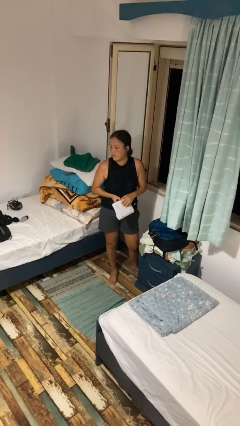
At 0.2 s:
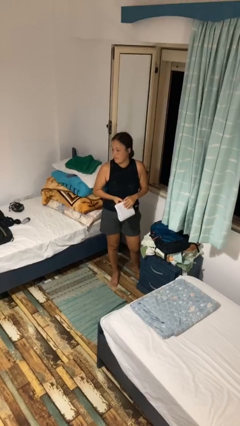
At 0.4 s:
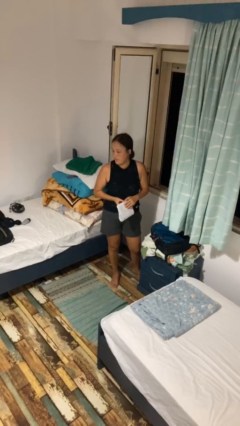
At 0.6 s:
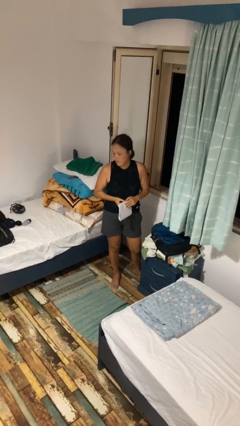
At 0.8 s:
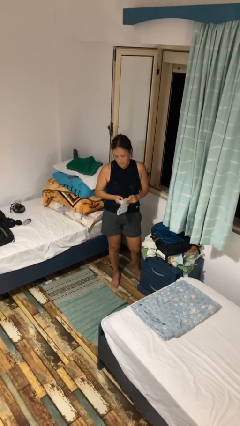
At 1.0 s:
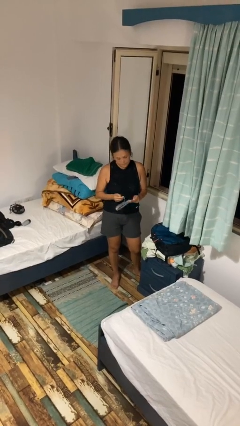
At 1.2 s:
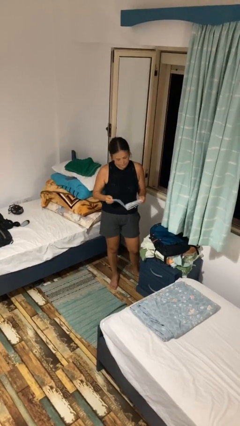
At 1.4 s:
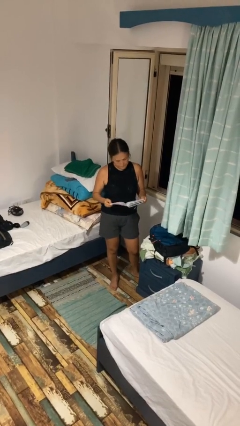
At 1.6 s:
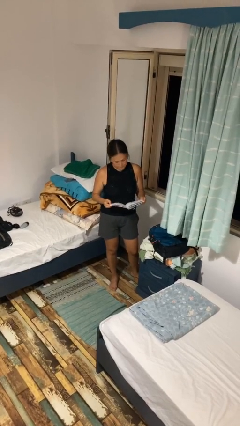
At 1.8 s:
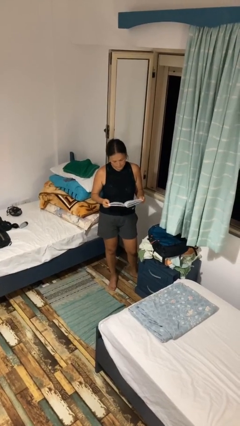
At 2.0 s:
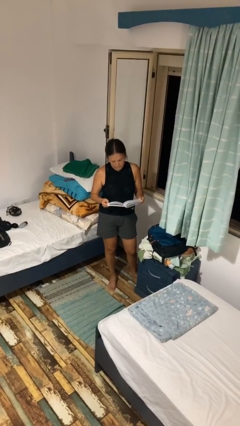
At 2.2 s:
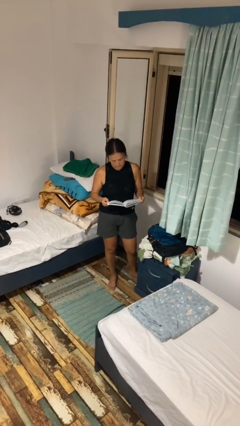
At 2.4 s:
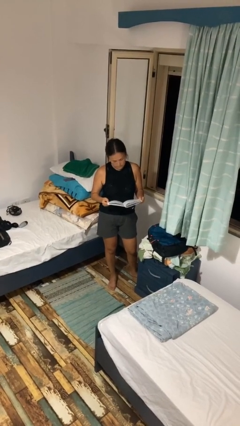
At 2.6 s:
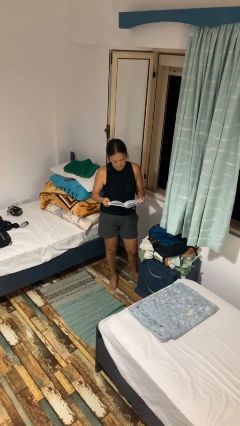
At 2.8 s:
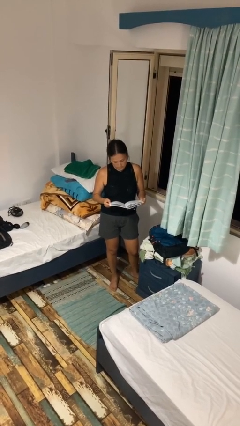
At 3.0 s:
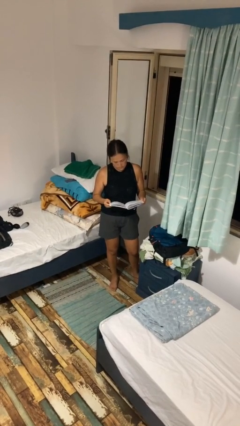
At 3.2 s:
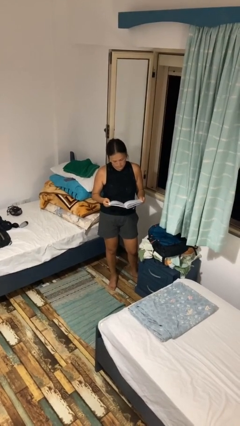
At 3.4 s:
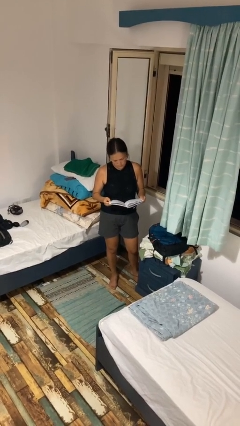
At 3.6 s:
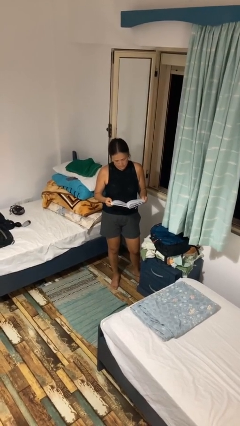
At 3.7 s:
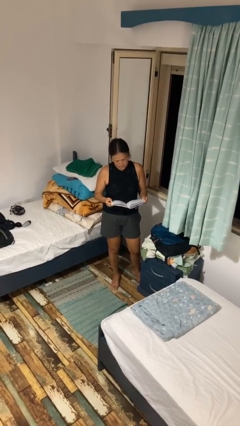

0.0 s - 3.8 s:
person reads book

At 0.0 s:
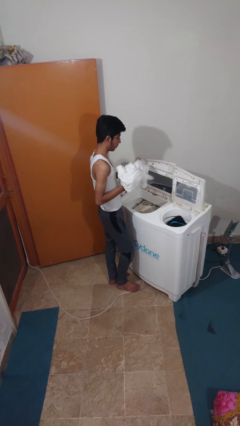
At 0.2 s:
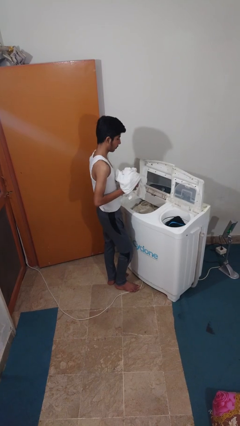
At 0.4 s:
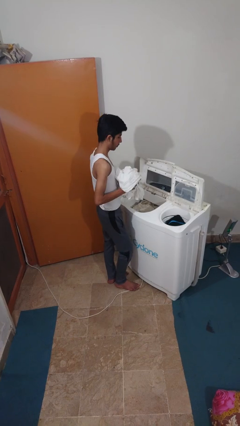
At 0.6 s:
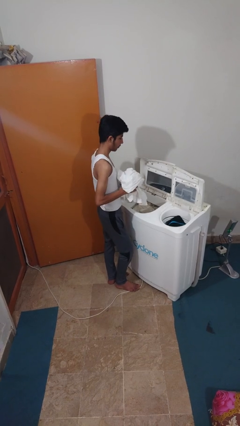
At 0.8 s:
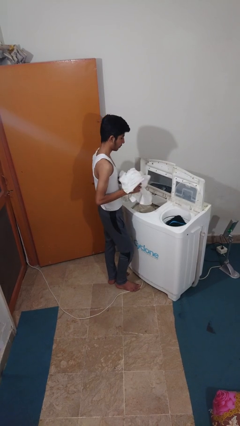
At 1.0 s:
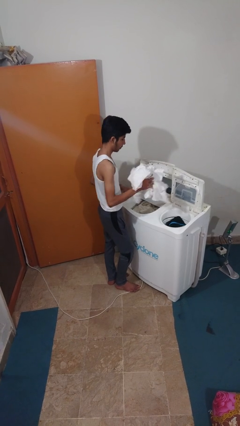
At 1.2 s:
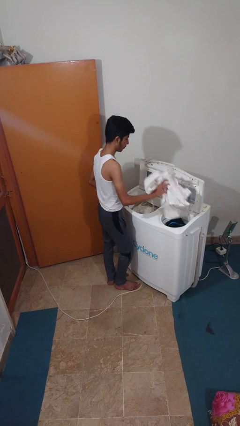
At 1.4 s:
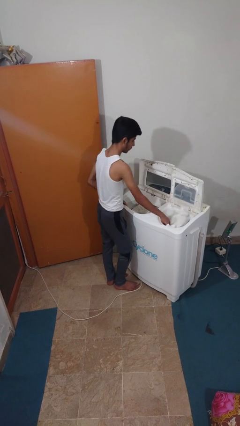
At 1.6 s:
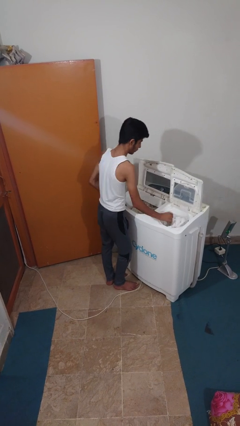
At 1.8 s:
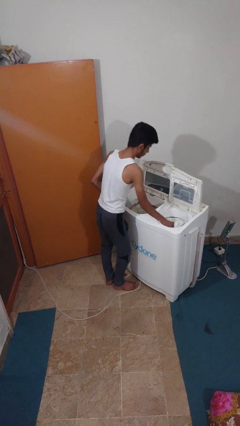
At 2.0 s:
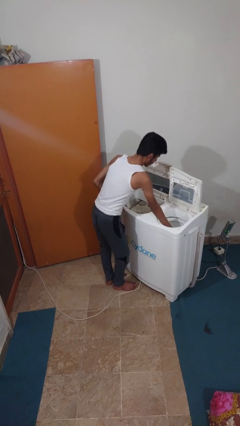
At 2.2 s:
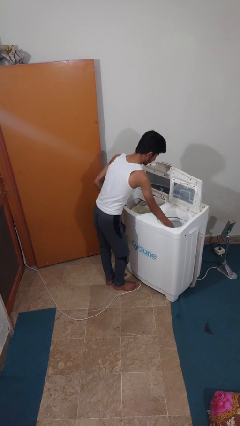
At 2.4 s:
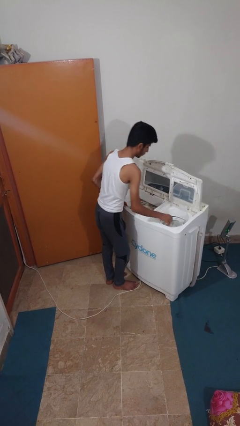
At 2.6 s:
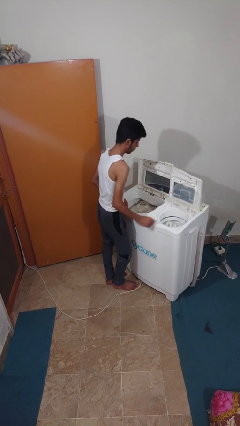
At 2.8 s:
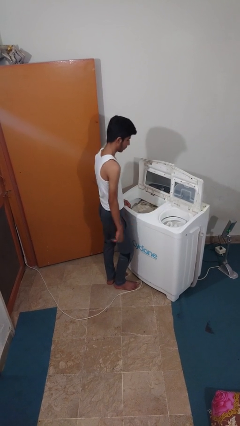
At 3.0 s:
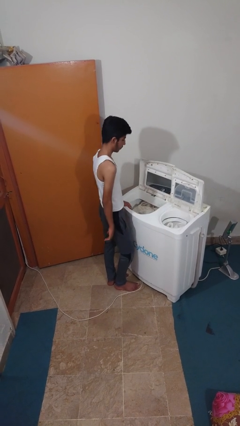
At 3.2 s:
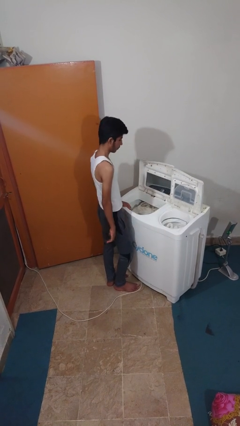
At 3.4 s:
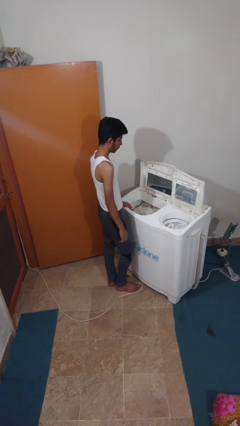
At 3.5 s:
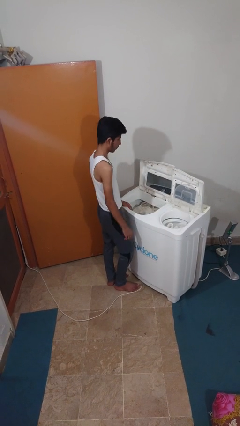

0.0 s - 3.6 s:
person loads dryer

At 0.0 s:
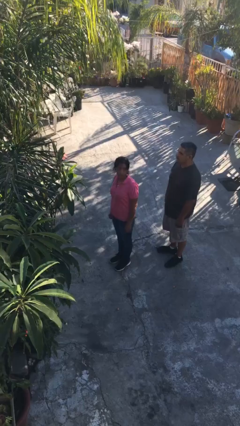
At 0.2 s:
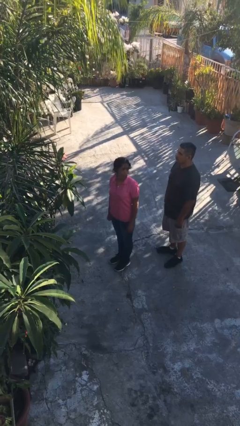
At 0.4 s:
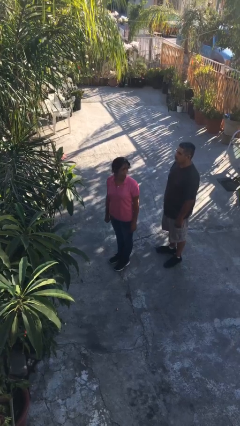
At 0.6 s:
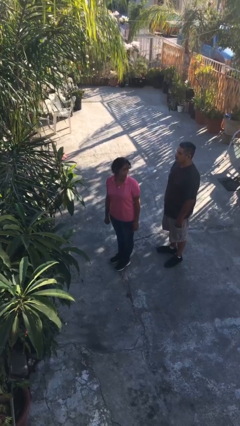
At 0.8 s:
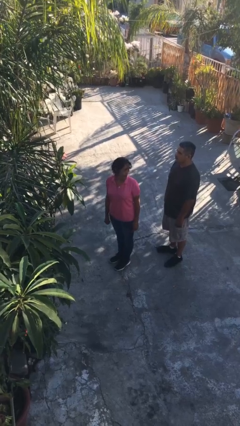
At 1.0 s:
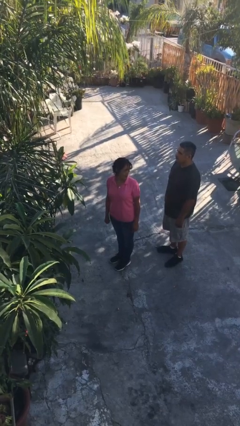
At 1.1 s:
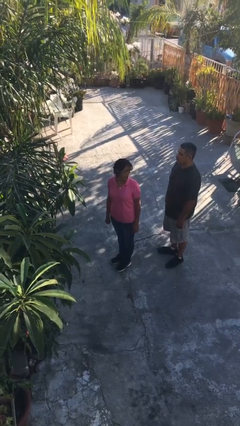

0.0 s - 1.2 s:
person looks over shoulder

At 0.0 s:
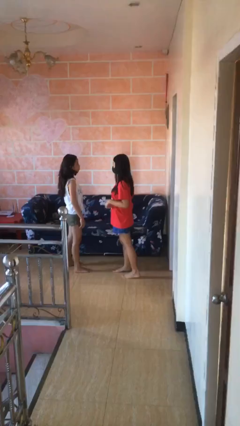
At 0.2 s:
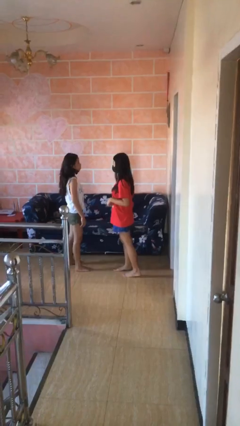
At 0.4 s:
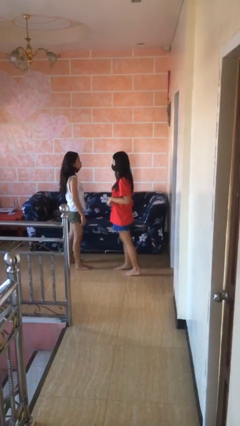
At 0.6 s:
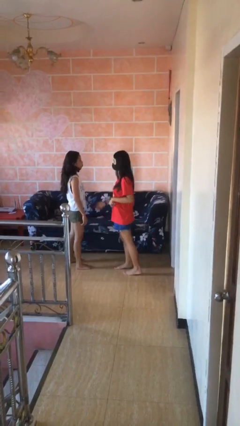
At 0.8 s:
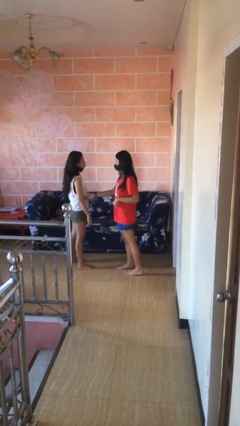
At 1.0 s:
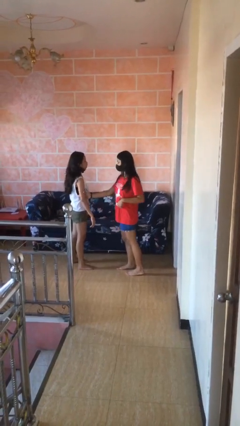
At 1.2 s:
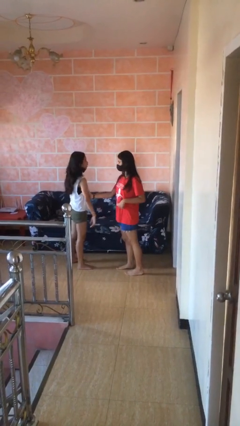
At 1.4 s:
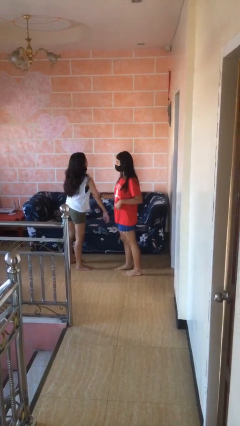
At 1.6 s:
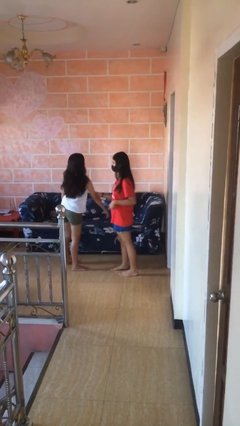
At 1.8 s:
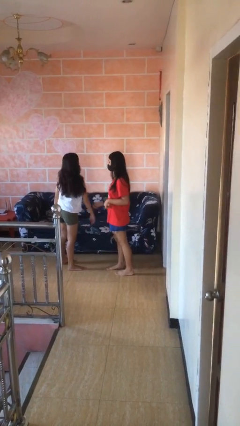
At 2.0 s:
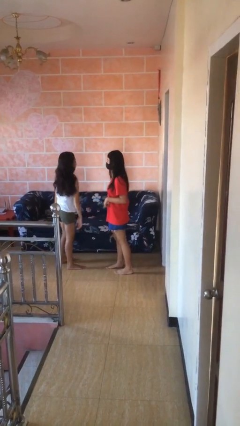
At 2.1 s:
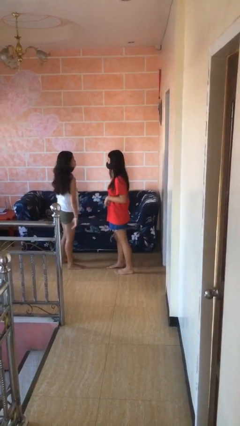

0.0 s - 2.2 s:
person grabs person by bicep

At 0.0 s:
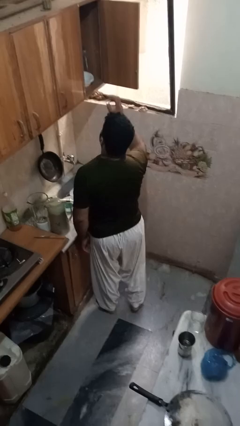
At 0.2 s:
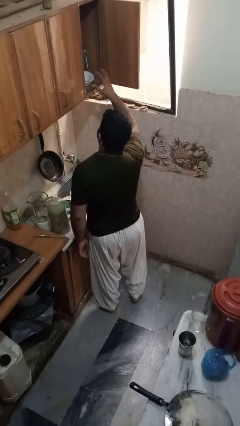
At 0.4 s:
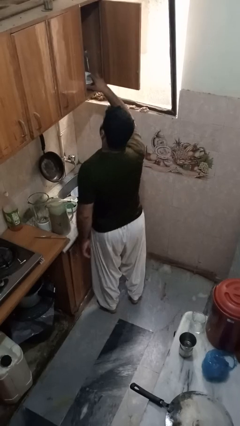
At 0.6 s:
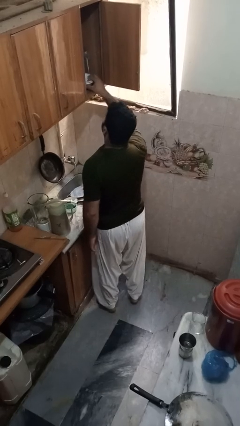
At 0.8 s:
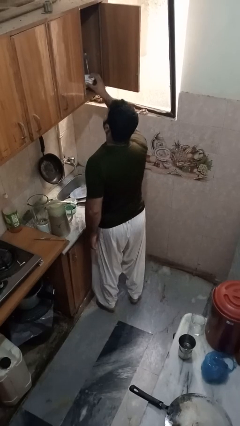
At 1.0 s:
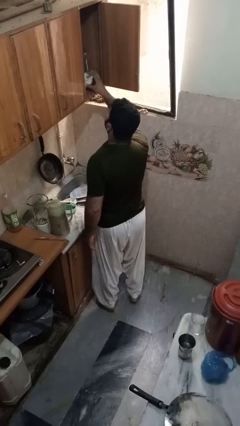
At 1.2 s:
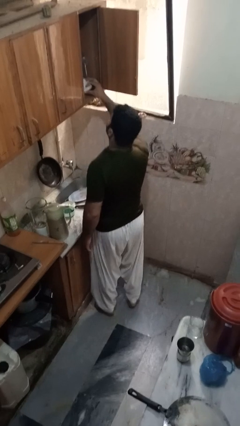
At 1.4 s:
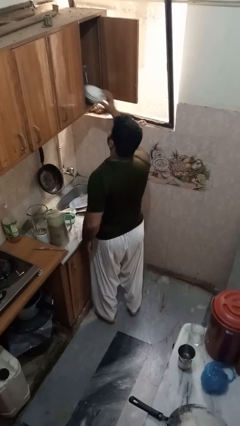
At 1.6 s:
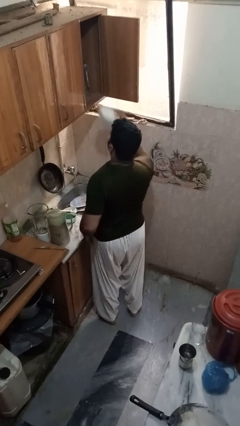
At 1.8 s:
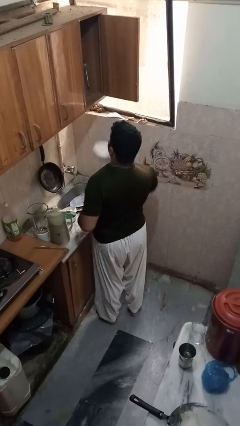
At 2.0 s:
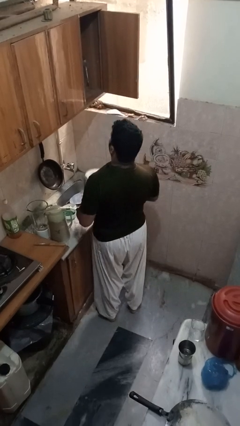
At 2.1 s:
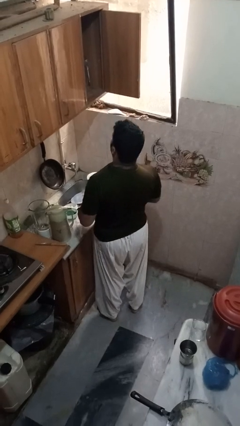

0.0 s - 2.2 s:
person takes object from cabinet

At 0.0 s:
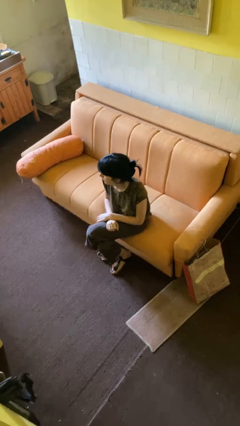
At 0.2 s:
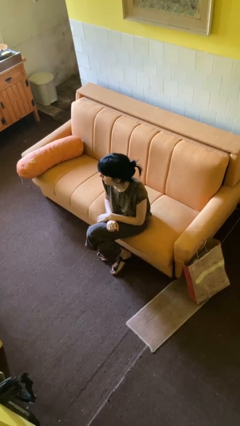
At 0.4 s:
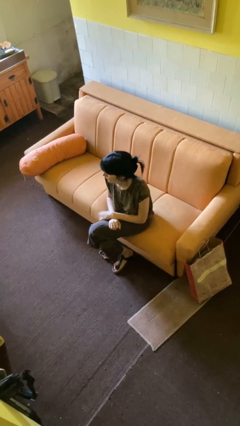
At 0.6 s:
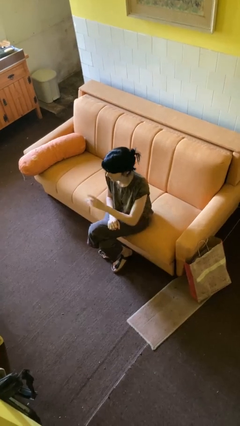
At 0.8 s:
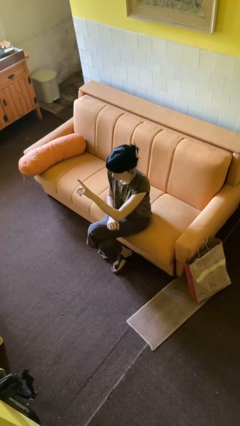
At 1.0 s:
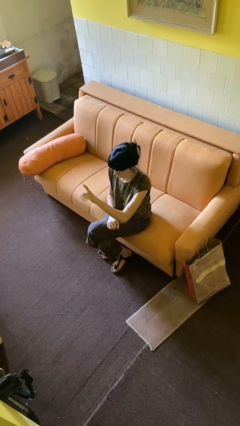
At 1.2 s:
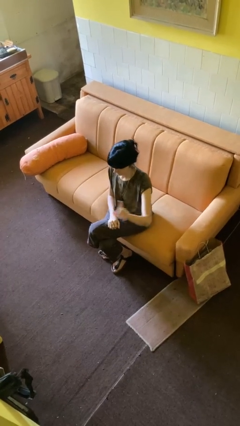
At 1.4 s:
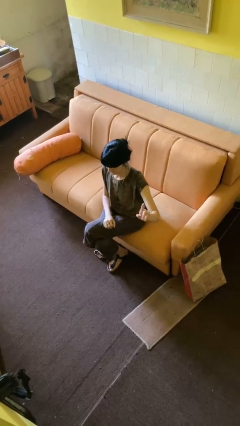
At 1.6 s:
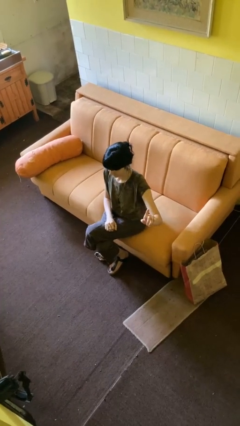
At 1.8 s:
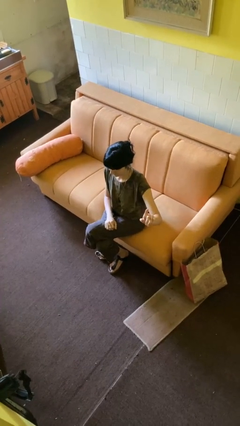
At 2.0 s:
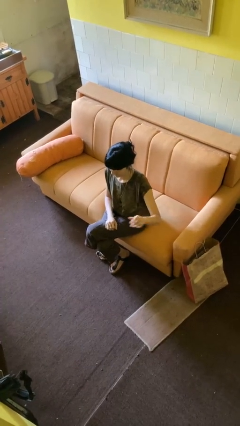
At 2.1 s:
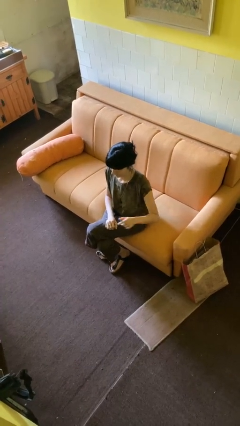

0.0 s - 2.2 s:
person gestures swipe left

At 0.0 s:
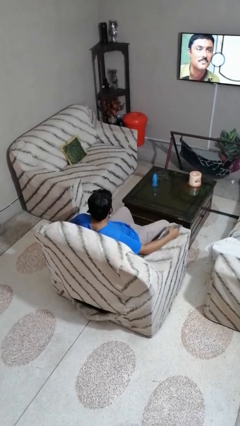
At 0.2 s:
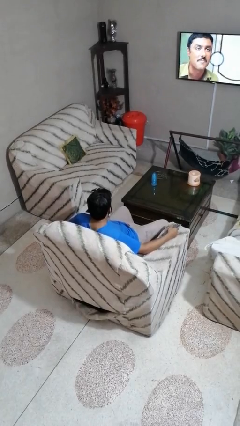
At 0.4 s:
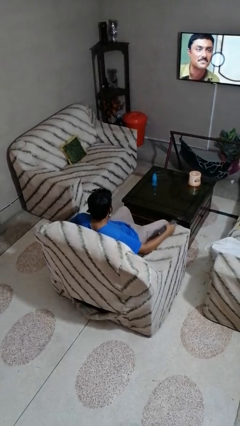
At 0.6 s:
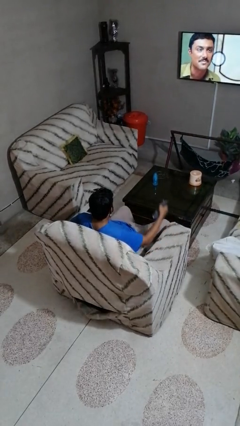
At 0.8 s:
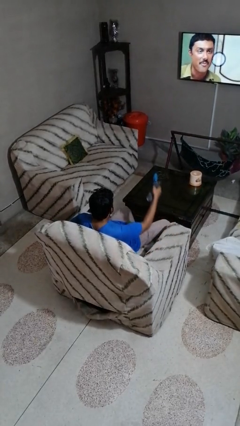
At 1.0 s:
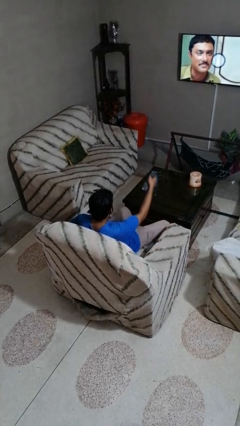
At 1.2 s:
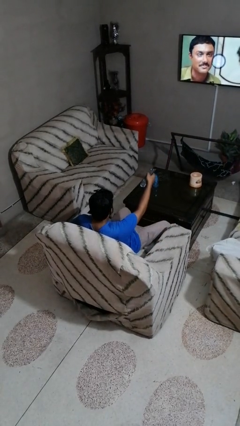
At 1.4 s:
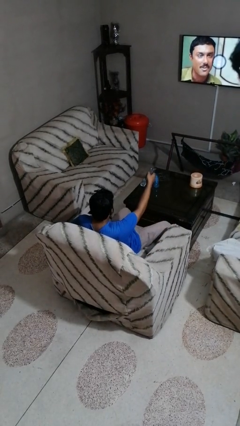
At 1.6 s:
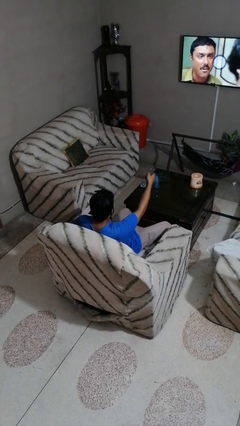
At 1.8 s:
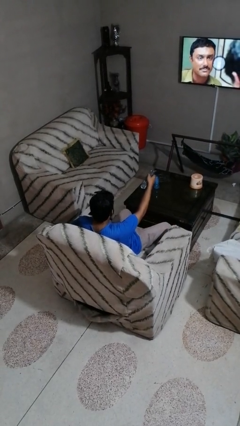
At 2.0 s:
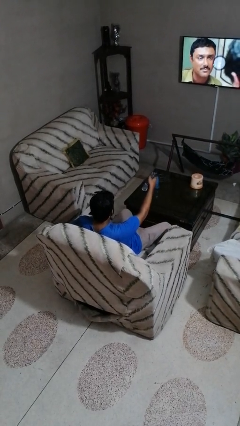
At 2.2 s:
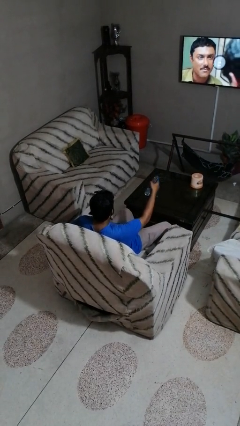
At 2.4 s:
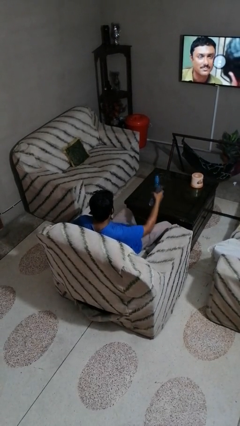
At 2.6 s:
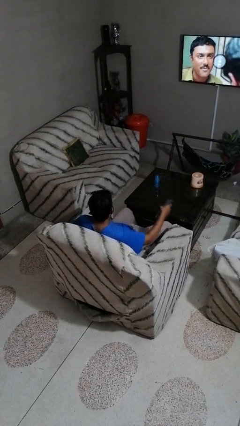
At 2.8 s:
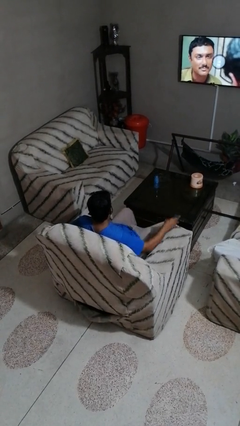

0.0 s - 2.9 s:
person uses television remote
